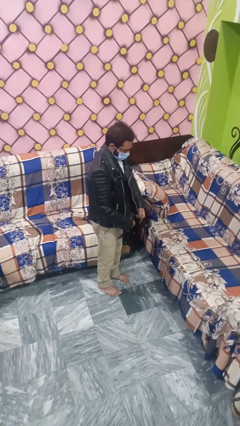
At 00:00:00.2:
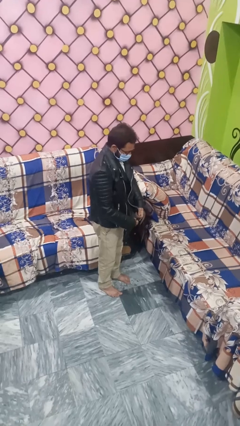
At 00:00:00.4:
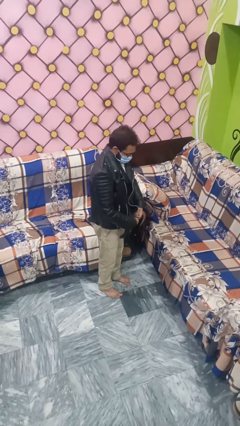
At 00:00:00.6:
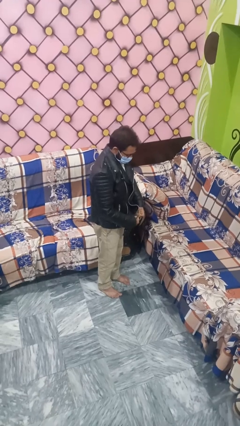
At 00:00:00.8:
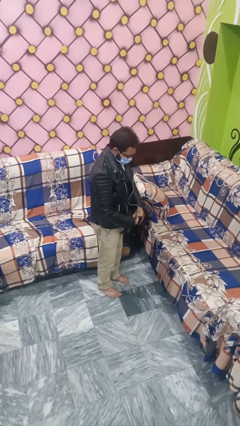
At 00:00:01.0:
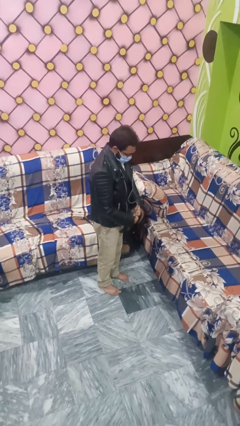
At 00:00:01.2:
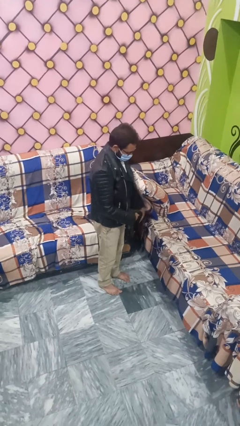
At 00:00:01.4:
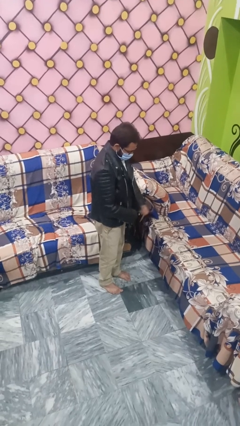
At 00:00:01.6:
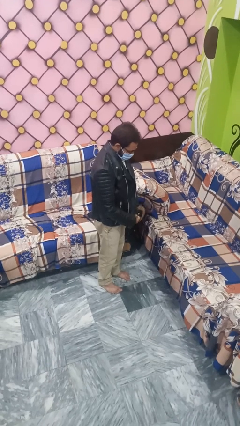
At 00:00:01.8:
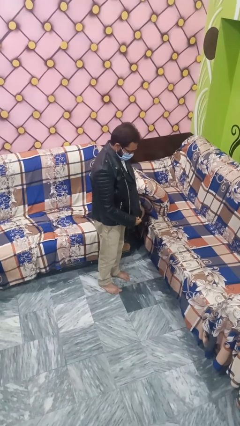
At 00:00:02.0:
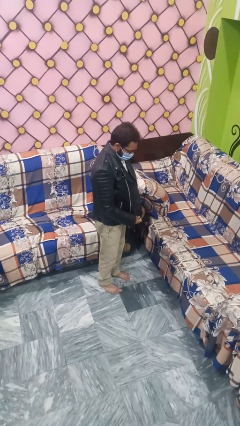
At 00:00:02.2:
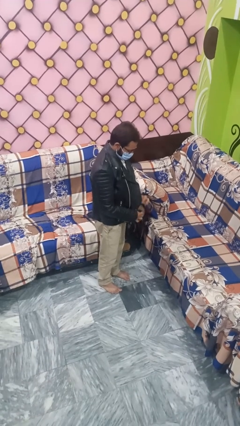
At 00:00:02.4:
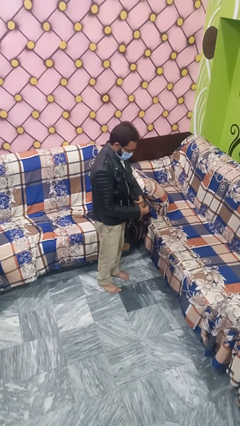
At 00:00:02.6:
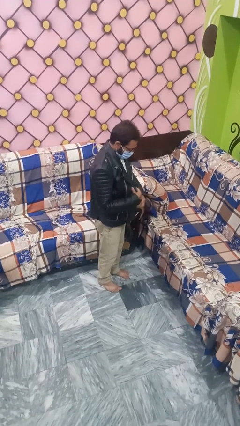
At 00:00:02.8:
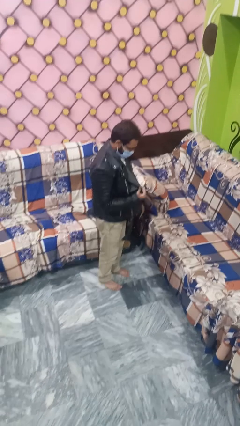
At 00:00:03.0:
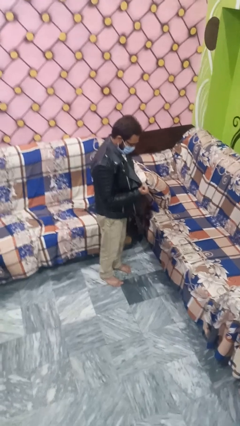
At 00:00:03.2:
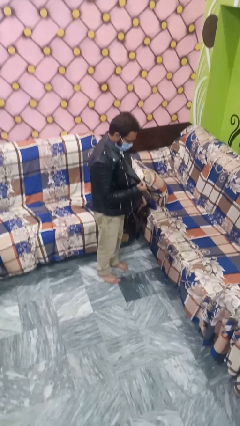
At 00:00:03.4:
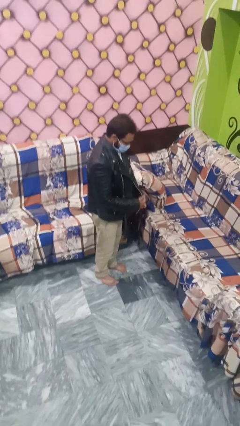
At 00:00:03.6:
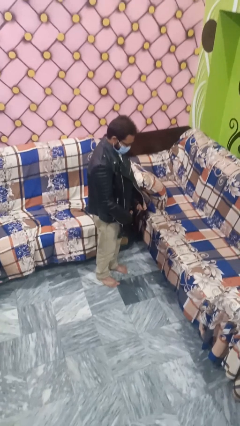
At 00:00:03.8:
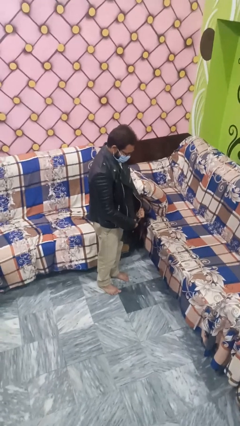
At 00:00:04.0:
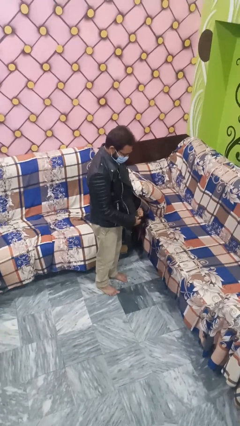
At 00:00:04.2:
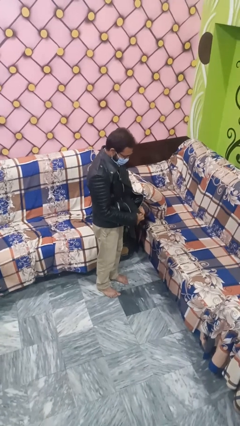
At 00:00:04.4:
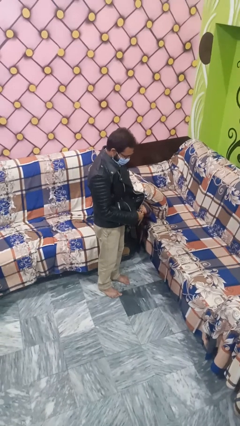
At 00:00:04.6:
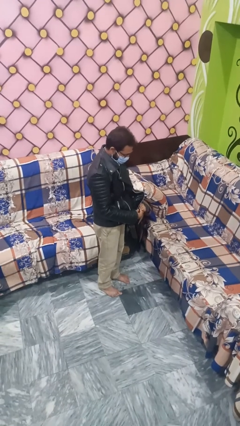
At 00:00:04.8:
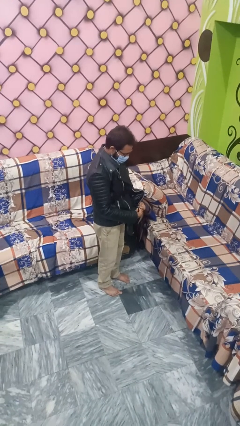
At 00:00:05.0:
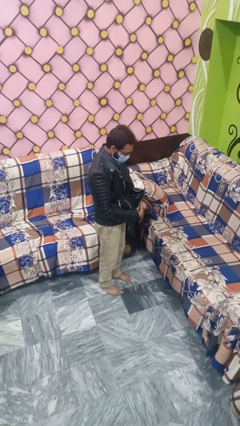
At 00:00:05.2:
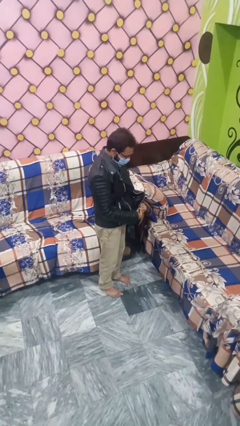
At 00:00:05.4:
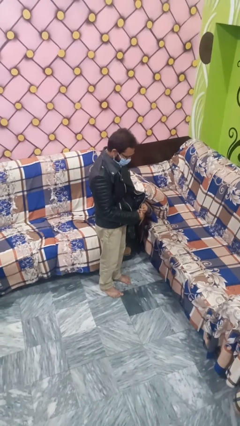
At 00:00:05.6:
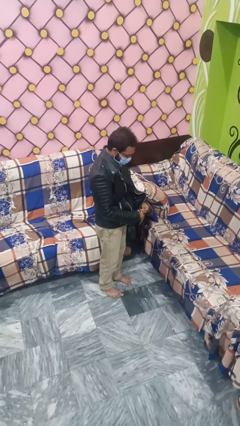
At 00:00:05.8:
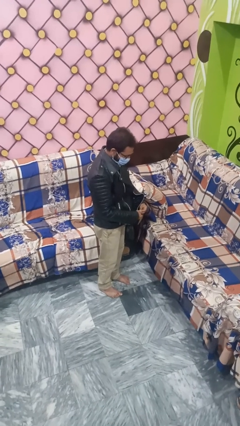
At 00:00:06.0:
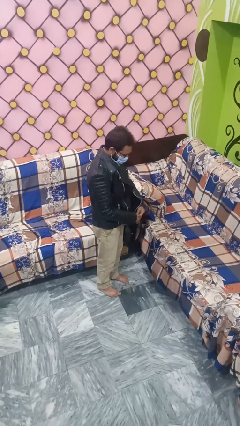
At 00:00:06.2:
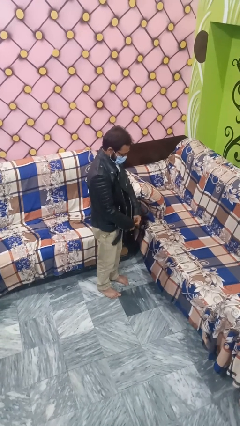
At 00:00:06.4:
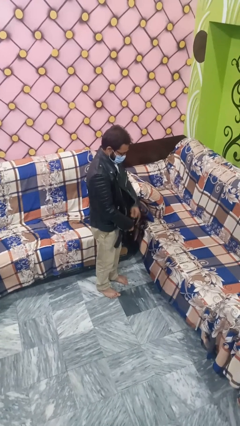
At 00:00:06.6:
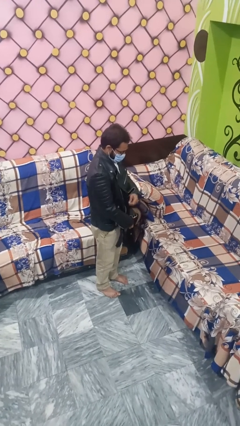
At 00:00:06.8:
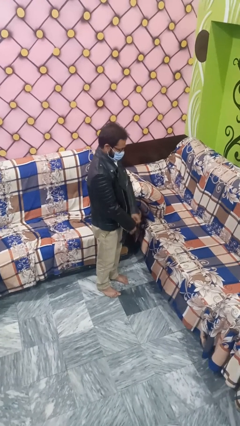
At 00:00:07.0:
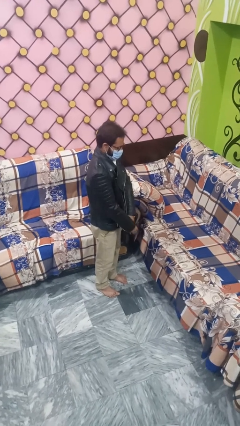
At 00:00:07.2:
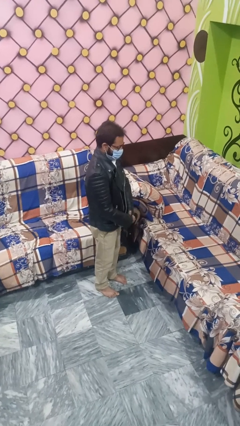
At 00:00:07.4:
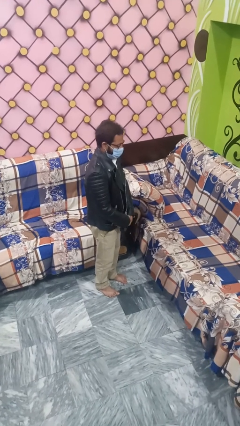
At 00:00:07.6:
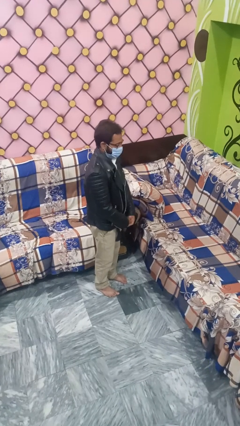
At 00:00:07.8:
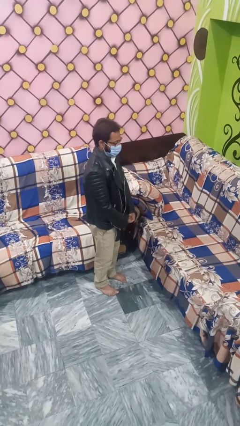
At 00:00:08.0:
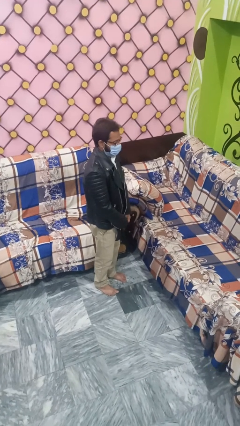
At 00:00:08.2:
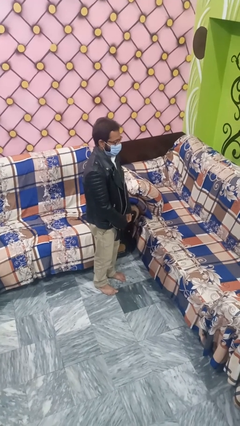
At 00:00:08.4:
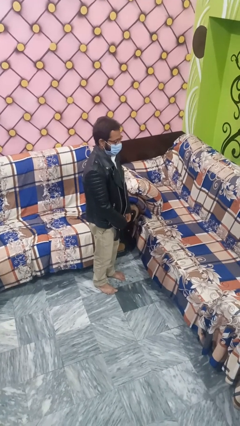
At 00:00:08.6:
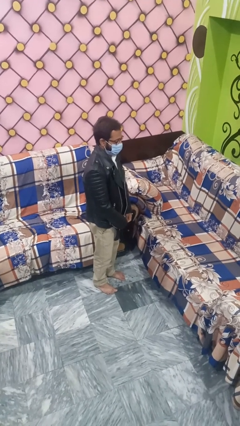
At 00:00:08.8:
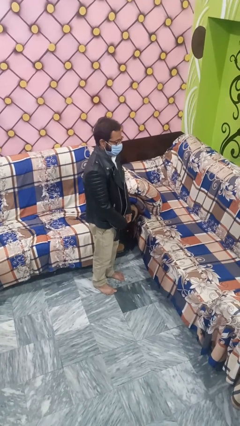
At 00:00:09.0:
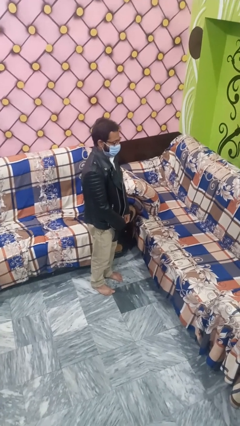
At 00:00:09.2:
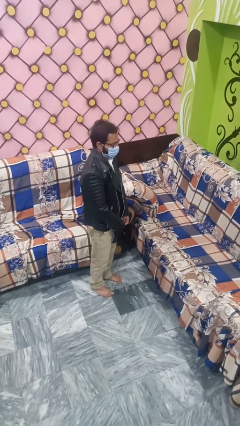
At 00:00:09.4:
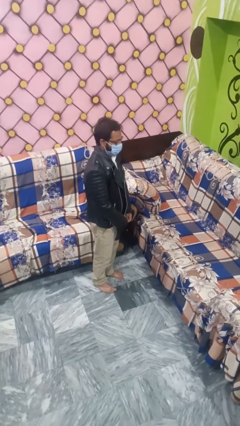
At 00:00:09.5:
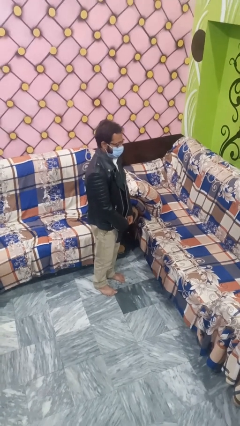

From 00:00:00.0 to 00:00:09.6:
person zips up jacket

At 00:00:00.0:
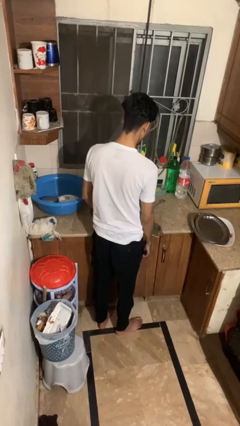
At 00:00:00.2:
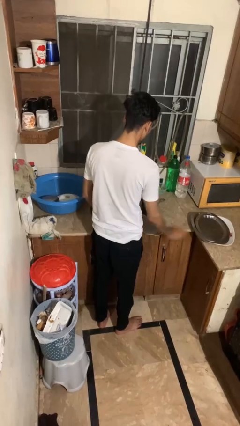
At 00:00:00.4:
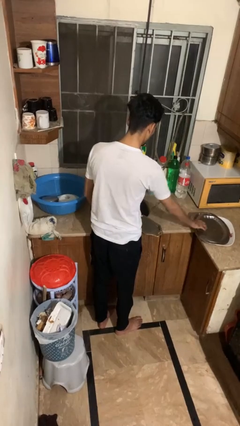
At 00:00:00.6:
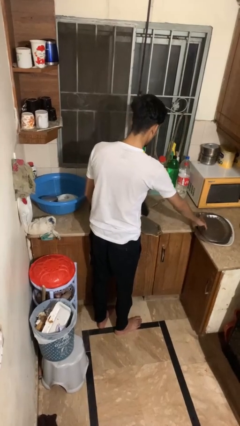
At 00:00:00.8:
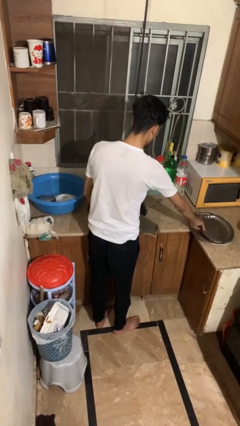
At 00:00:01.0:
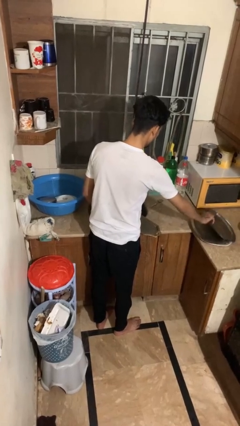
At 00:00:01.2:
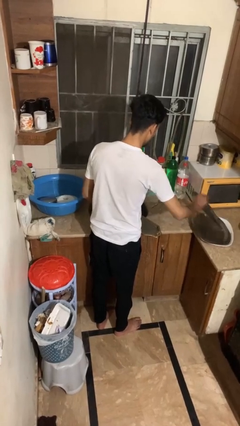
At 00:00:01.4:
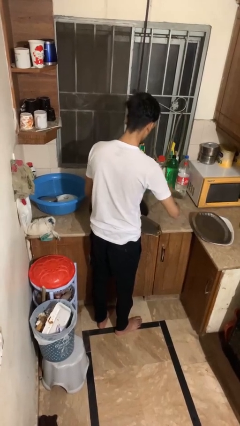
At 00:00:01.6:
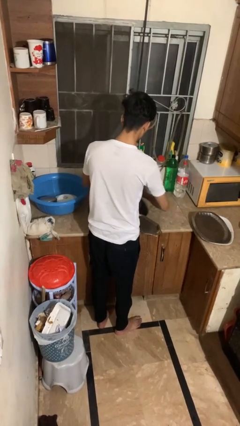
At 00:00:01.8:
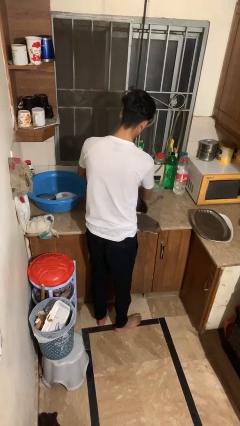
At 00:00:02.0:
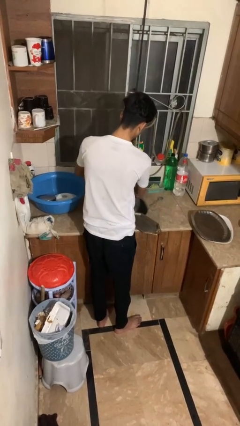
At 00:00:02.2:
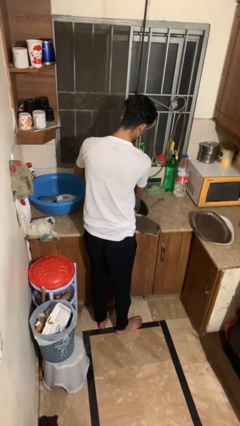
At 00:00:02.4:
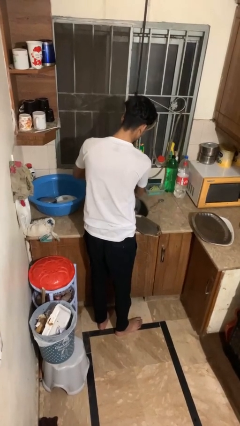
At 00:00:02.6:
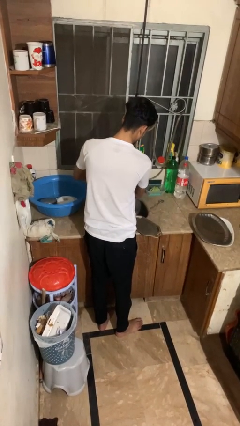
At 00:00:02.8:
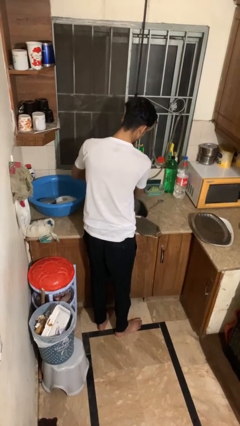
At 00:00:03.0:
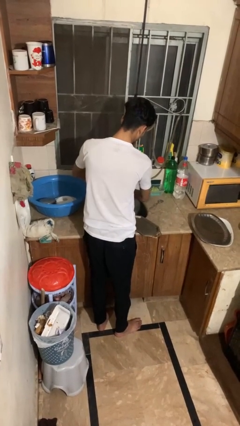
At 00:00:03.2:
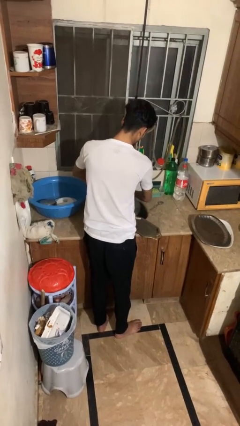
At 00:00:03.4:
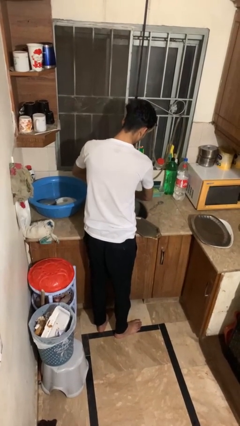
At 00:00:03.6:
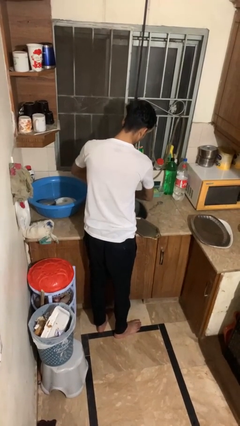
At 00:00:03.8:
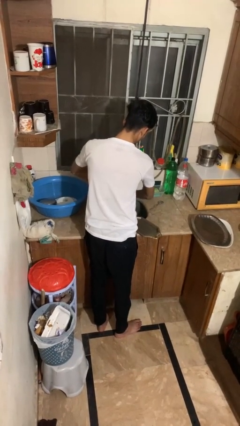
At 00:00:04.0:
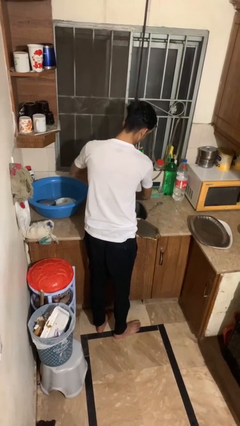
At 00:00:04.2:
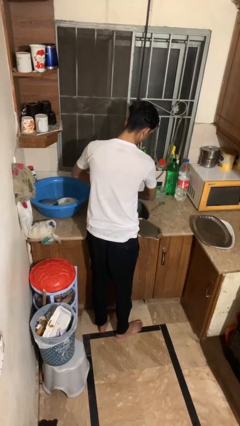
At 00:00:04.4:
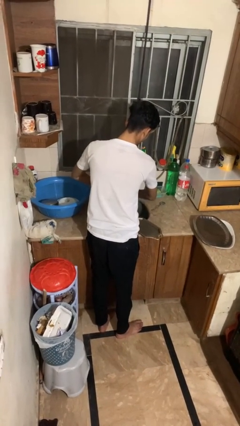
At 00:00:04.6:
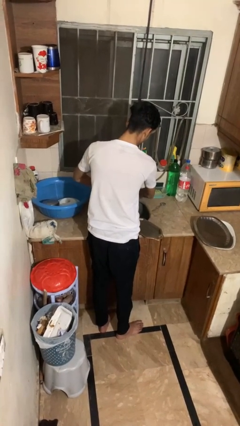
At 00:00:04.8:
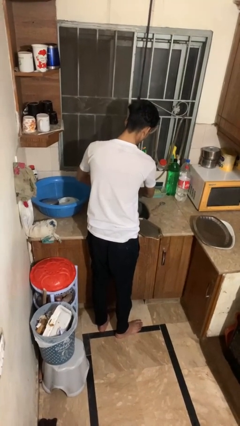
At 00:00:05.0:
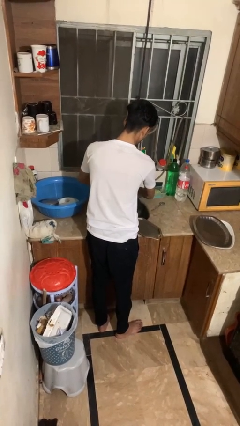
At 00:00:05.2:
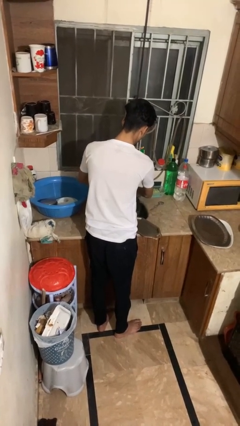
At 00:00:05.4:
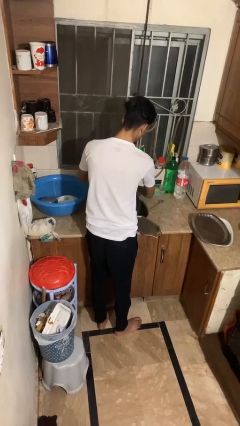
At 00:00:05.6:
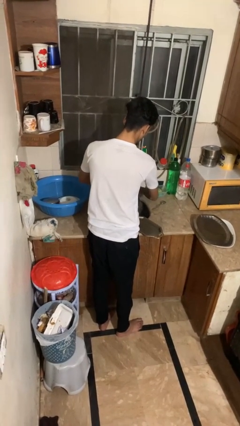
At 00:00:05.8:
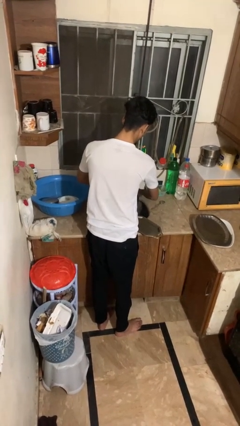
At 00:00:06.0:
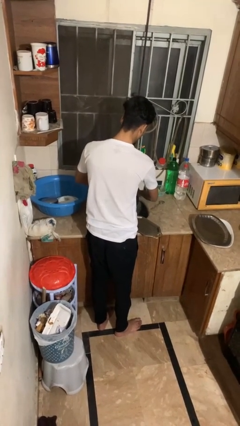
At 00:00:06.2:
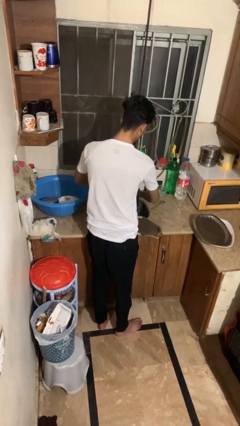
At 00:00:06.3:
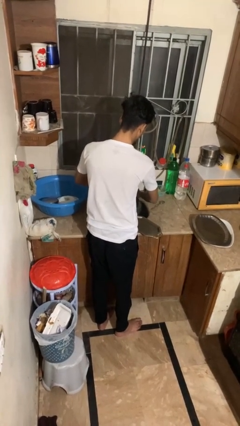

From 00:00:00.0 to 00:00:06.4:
person washes dish

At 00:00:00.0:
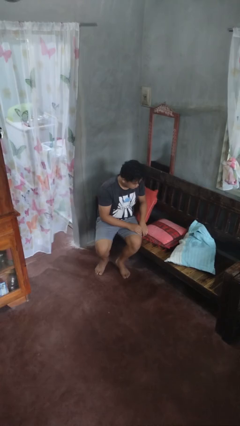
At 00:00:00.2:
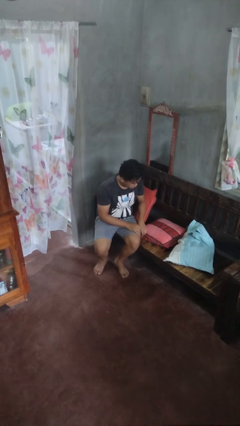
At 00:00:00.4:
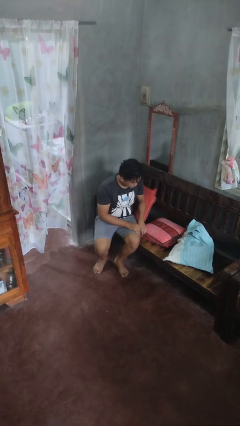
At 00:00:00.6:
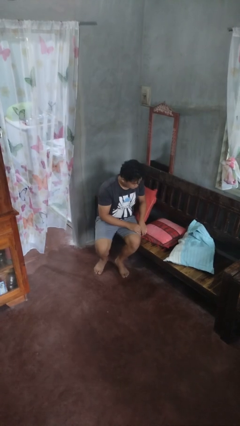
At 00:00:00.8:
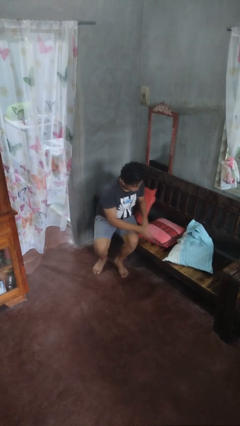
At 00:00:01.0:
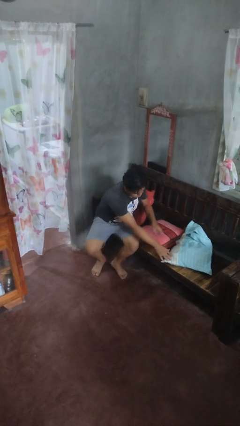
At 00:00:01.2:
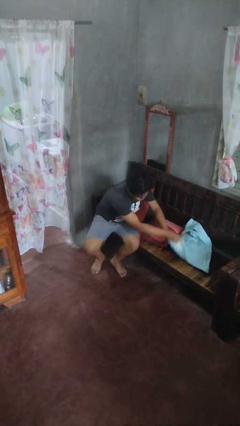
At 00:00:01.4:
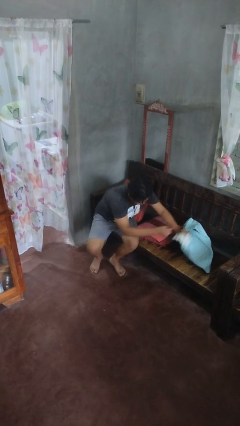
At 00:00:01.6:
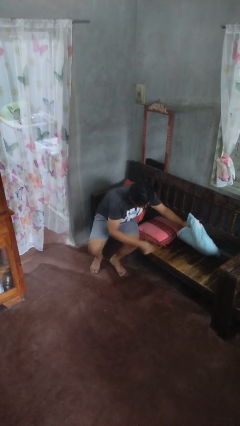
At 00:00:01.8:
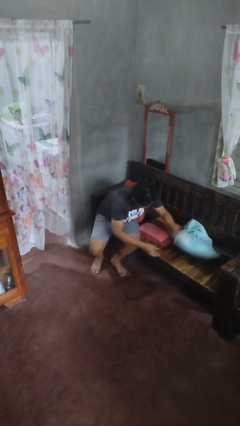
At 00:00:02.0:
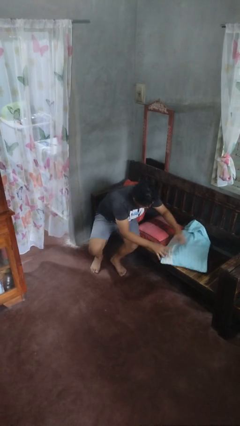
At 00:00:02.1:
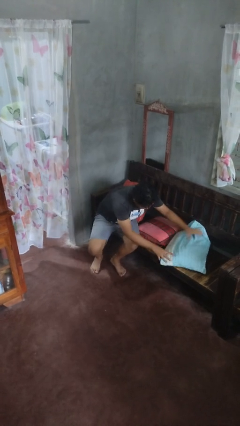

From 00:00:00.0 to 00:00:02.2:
person searches in couch
